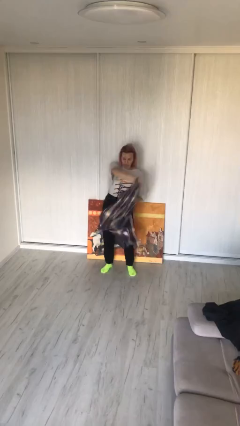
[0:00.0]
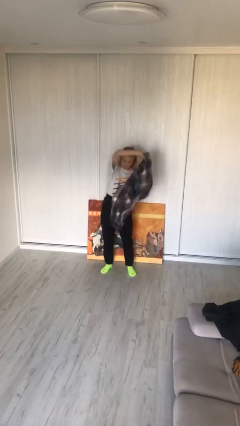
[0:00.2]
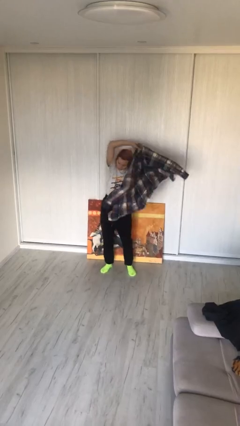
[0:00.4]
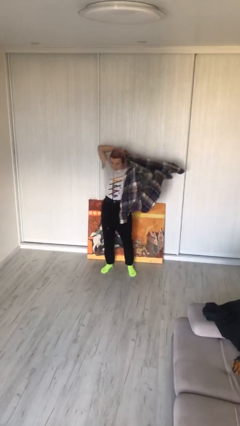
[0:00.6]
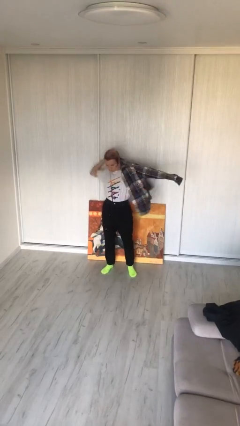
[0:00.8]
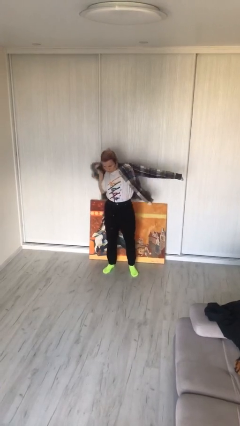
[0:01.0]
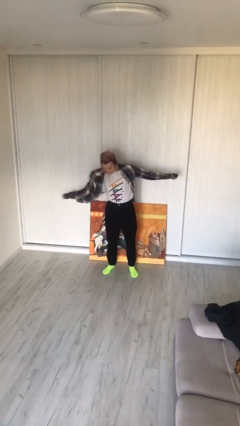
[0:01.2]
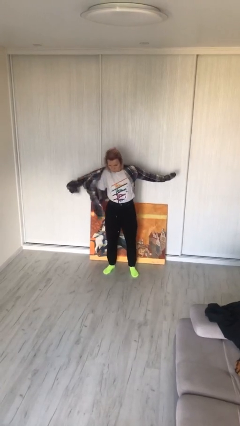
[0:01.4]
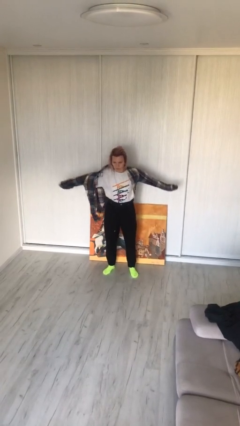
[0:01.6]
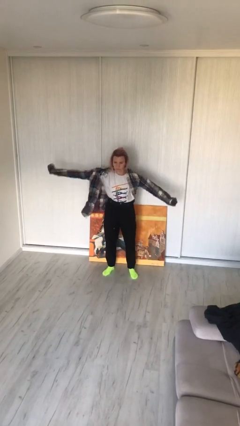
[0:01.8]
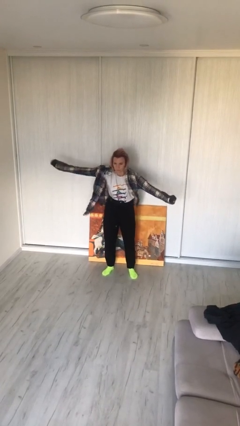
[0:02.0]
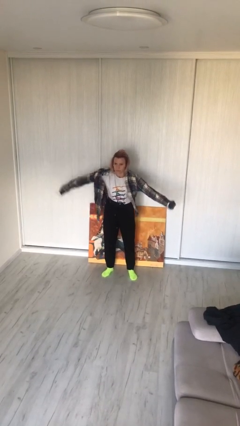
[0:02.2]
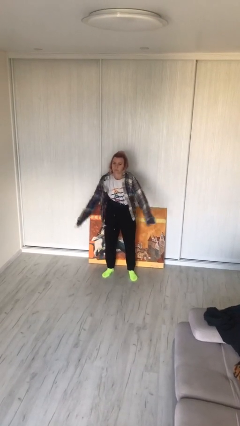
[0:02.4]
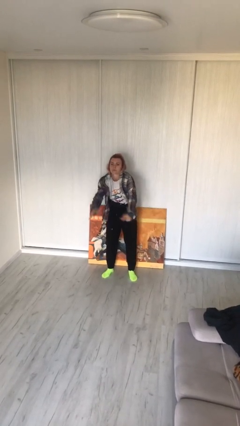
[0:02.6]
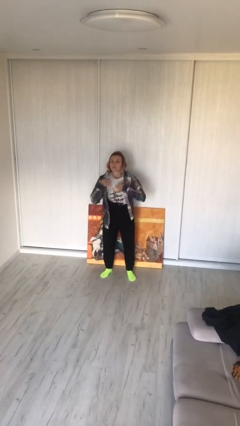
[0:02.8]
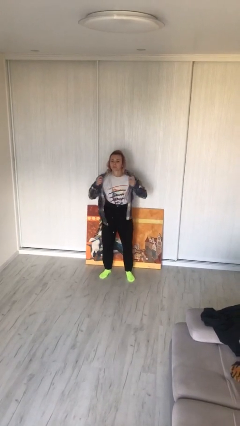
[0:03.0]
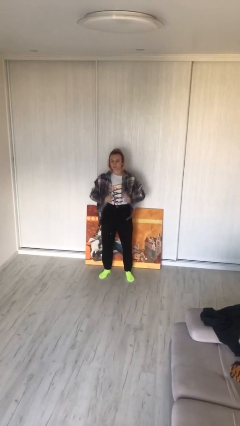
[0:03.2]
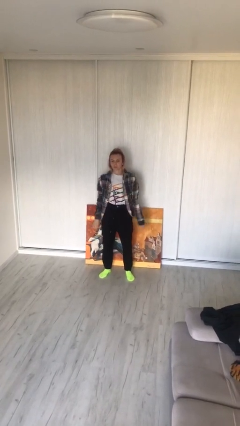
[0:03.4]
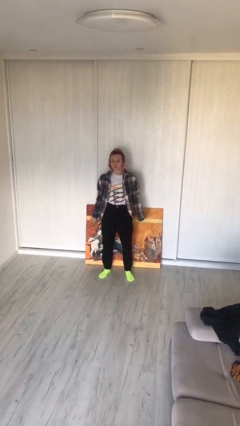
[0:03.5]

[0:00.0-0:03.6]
person puts on shirt

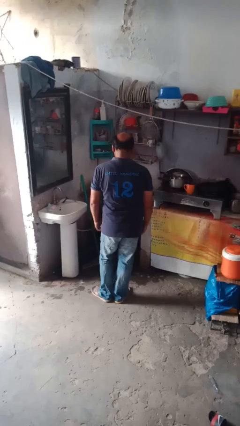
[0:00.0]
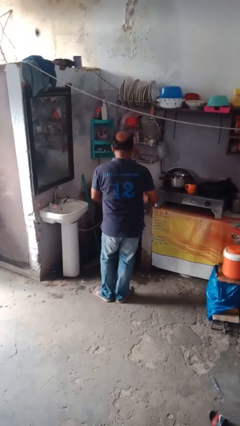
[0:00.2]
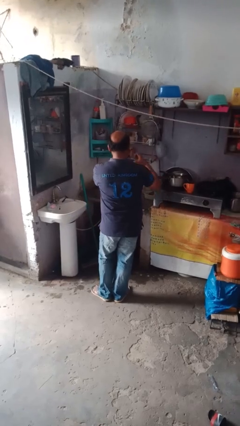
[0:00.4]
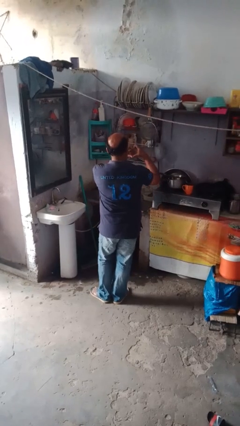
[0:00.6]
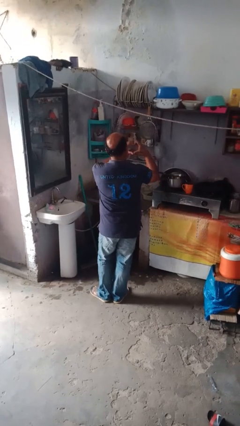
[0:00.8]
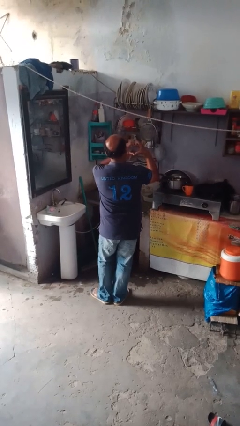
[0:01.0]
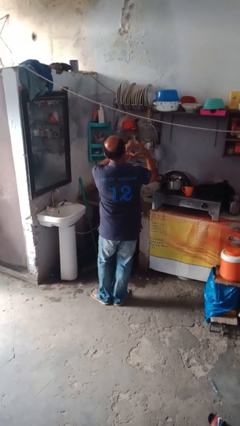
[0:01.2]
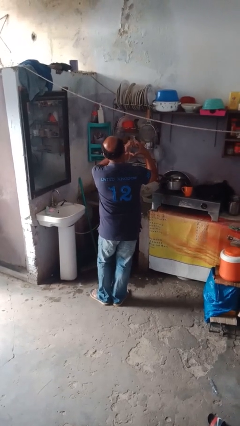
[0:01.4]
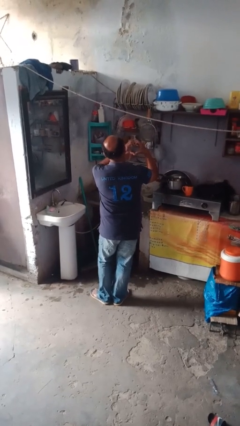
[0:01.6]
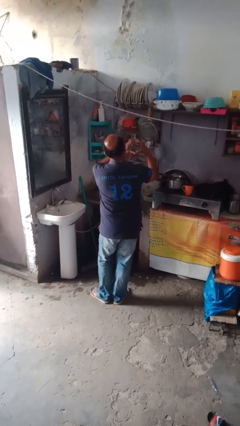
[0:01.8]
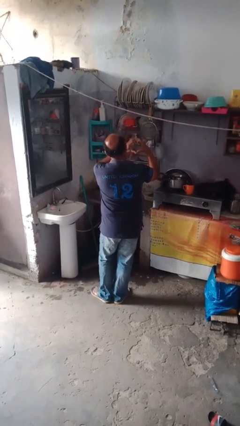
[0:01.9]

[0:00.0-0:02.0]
person gestures heart

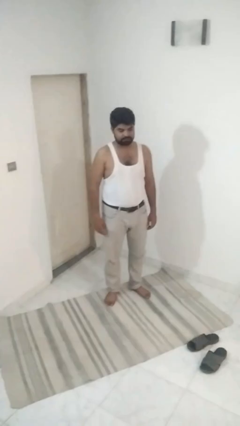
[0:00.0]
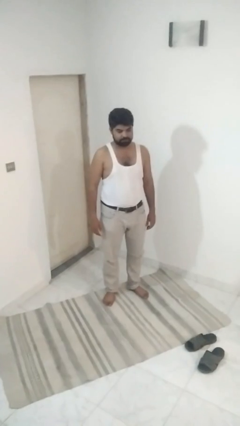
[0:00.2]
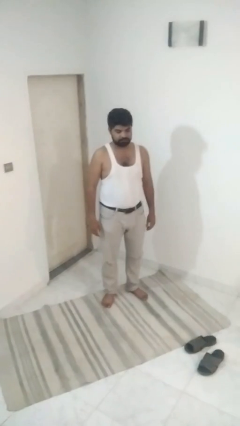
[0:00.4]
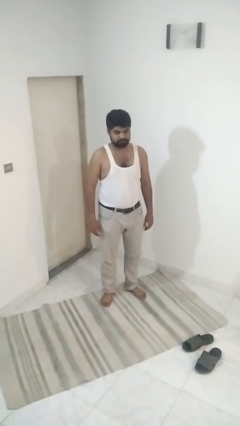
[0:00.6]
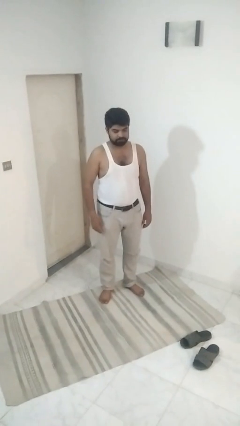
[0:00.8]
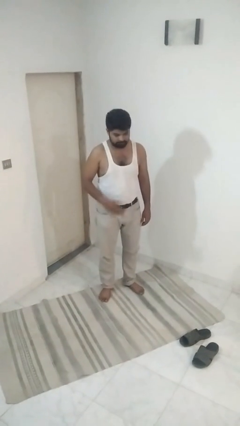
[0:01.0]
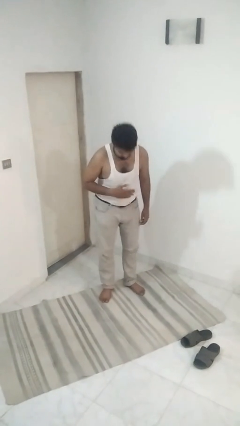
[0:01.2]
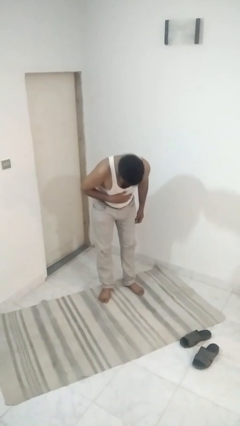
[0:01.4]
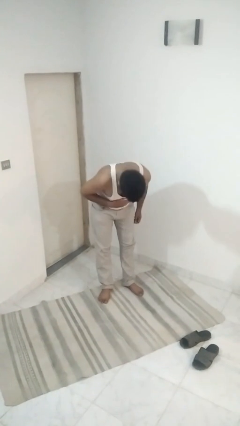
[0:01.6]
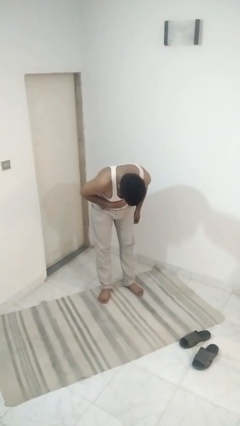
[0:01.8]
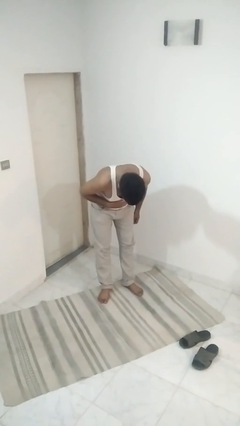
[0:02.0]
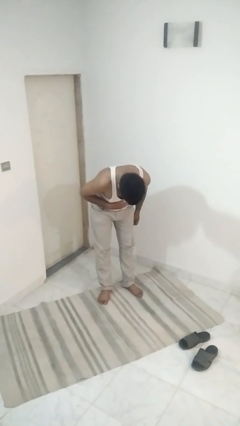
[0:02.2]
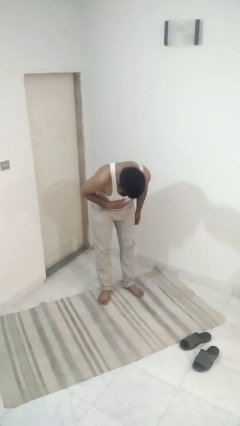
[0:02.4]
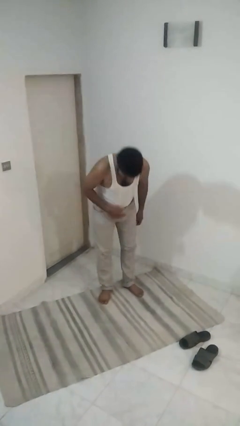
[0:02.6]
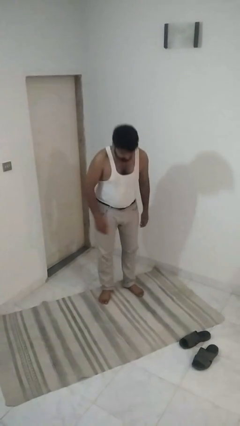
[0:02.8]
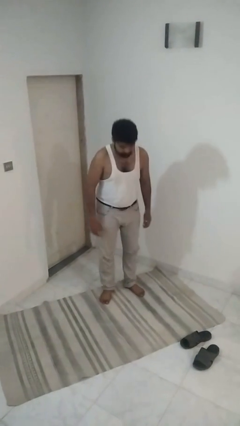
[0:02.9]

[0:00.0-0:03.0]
person bows

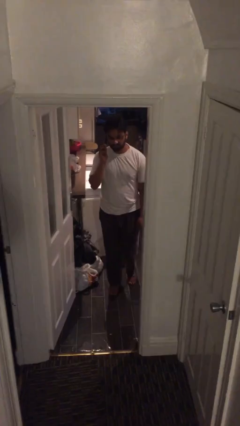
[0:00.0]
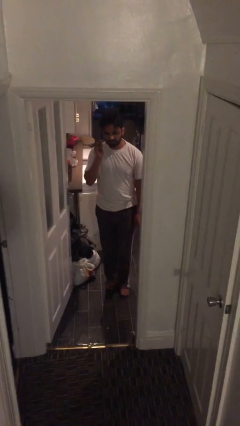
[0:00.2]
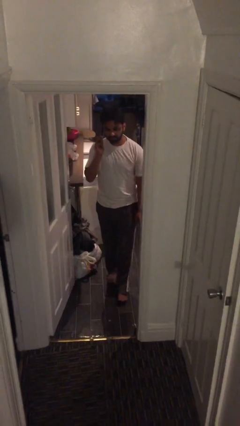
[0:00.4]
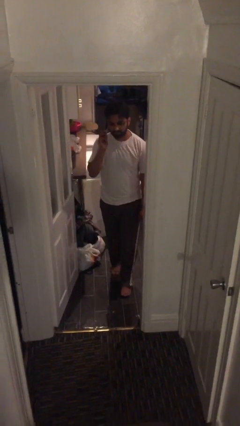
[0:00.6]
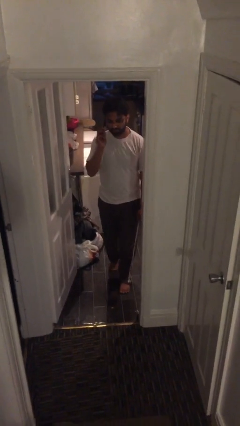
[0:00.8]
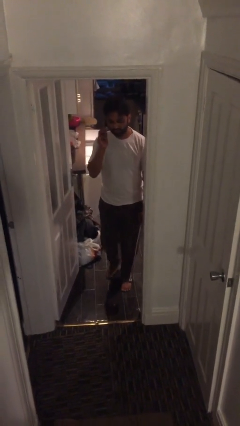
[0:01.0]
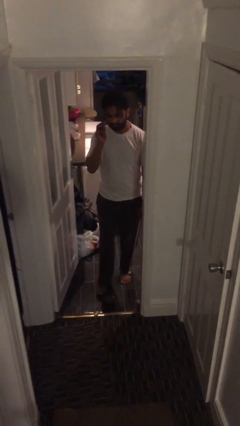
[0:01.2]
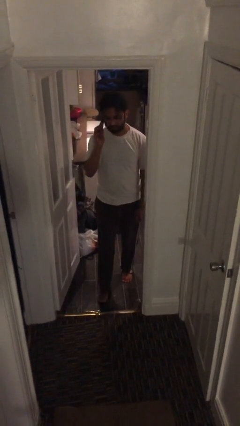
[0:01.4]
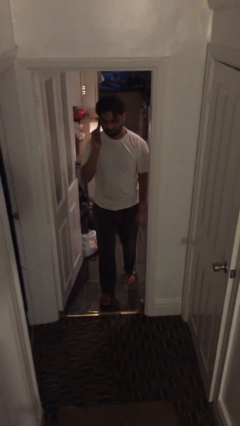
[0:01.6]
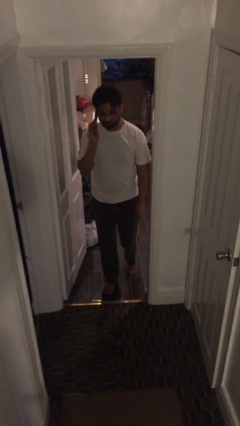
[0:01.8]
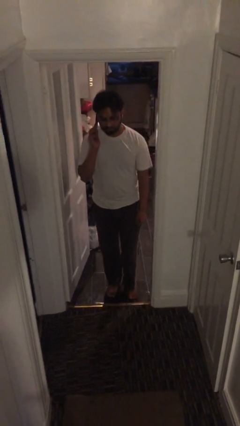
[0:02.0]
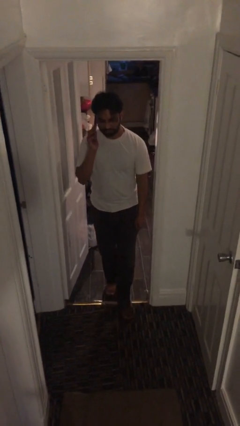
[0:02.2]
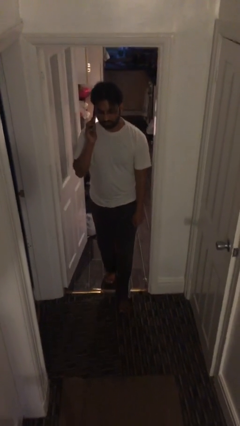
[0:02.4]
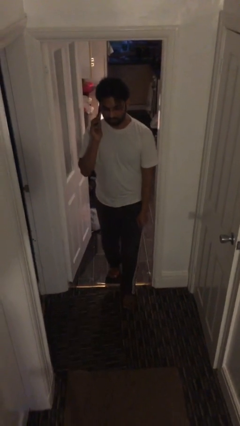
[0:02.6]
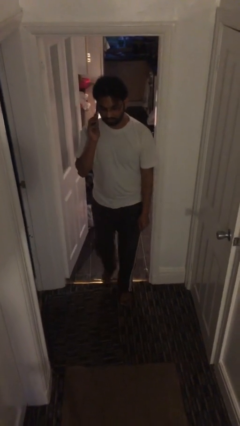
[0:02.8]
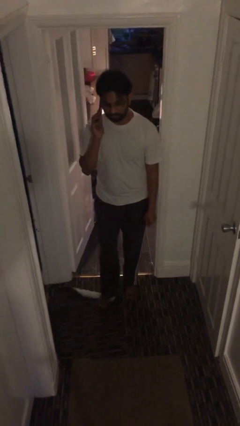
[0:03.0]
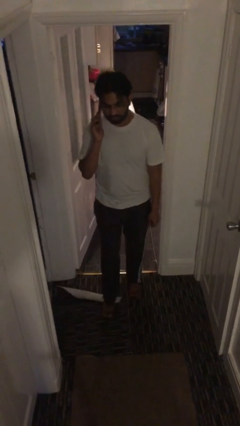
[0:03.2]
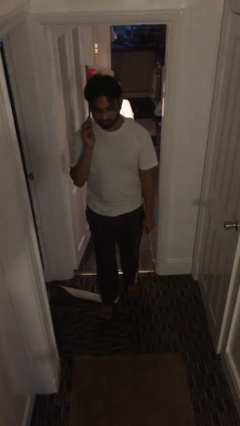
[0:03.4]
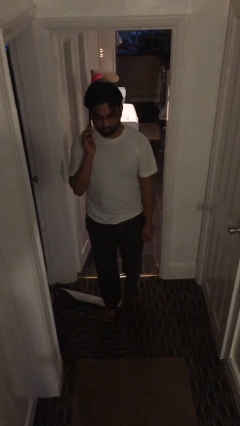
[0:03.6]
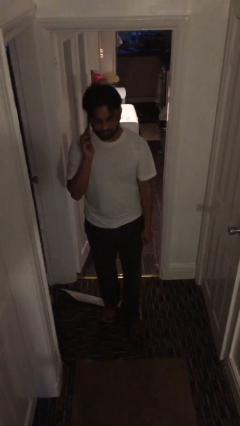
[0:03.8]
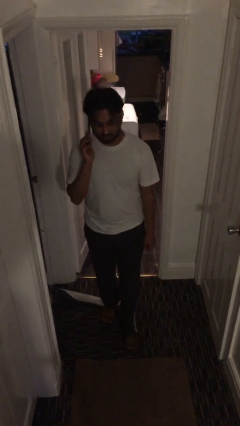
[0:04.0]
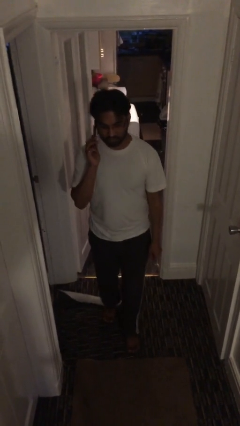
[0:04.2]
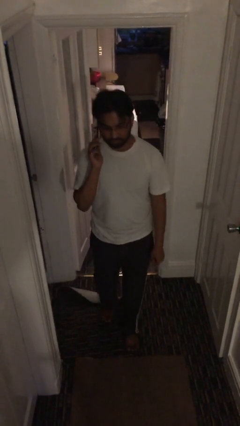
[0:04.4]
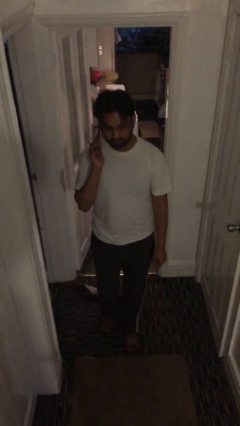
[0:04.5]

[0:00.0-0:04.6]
person enters scene through structure

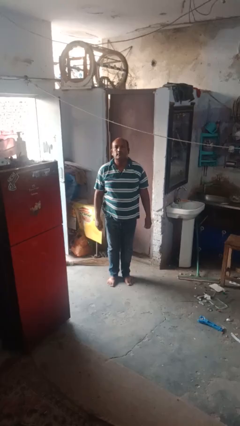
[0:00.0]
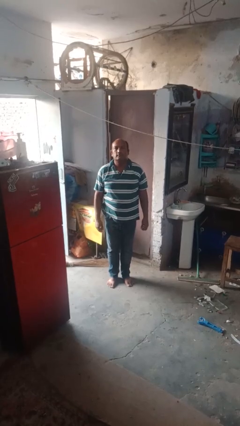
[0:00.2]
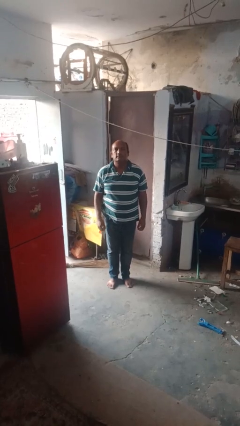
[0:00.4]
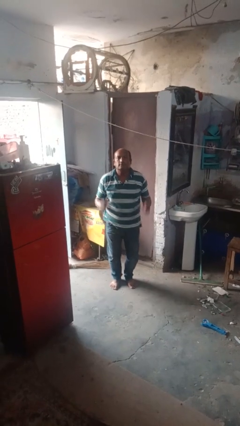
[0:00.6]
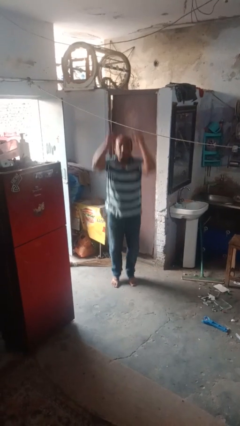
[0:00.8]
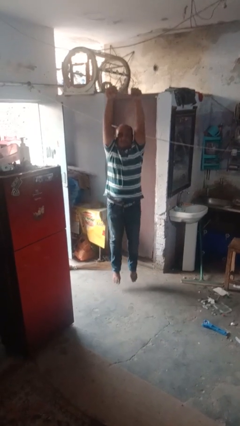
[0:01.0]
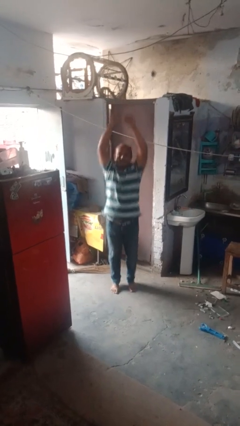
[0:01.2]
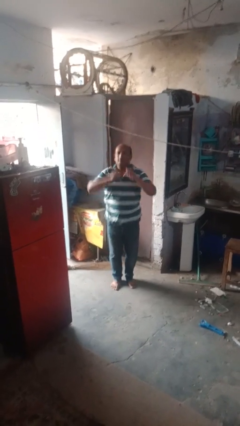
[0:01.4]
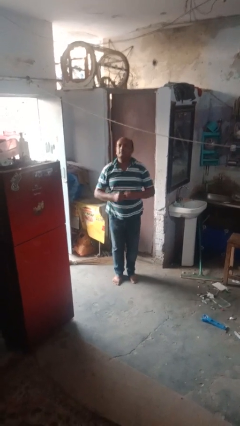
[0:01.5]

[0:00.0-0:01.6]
person jumps

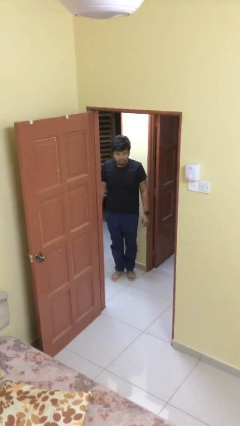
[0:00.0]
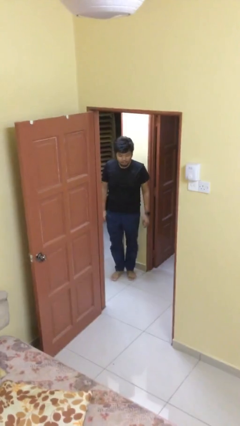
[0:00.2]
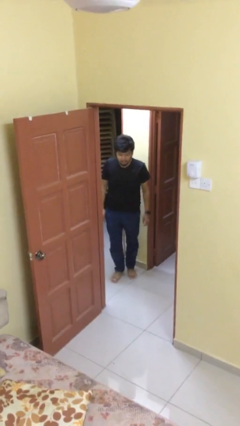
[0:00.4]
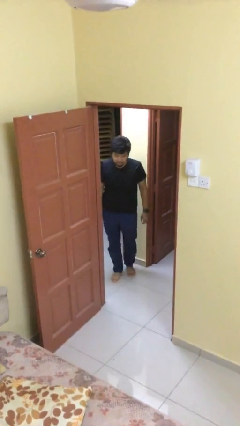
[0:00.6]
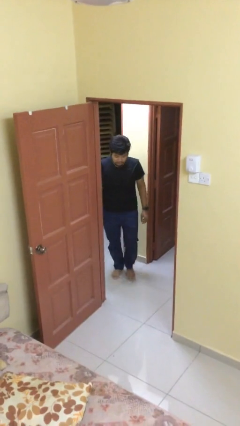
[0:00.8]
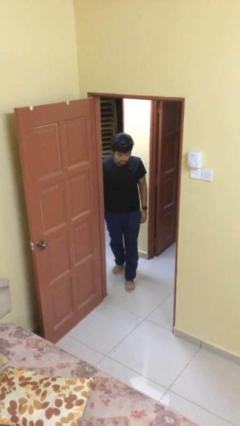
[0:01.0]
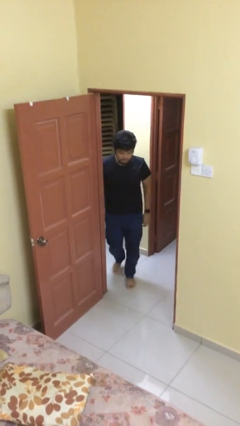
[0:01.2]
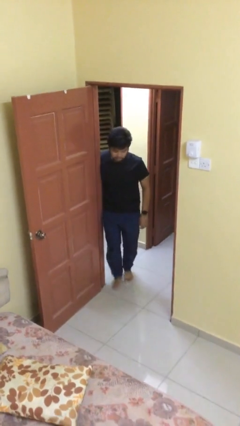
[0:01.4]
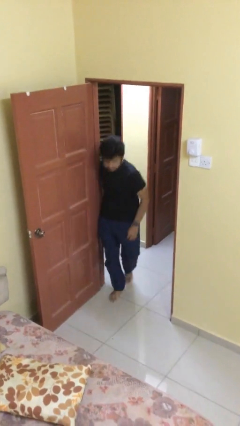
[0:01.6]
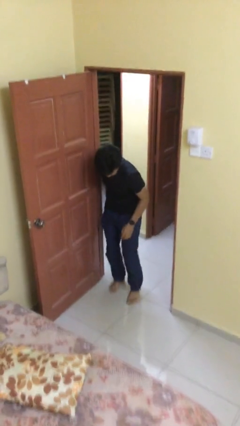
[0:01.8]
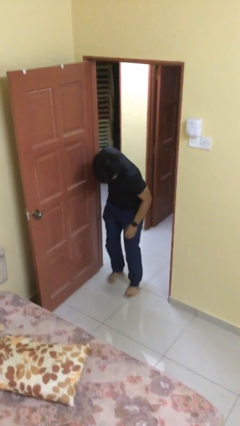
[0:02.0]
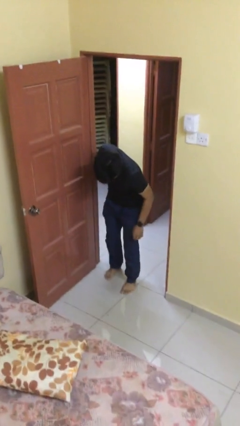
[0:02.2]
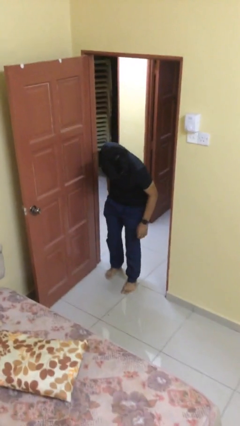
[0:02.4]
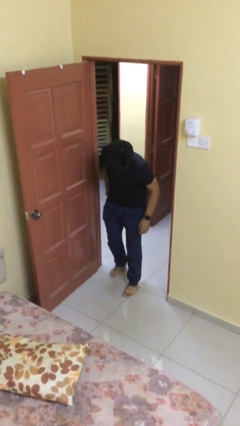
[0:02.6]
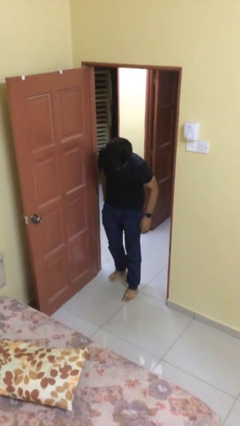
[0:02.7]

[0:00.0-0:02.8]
person bumps into wall
